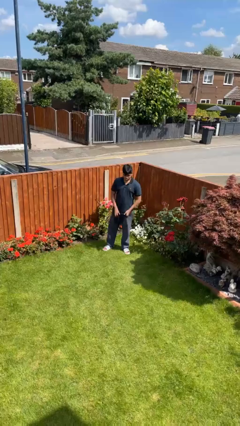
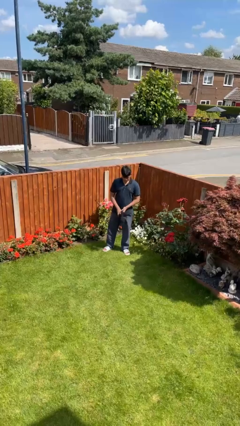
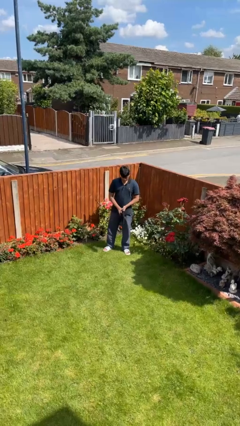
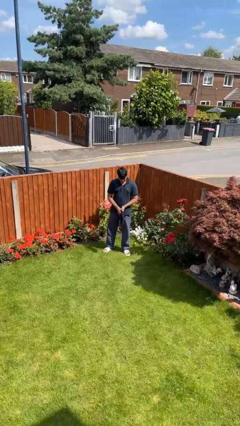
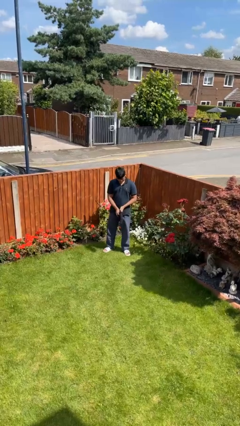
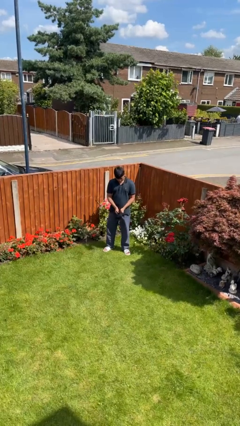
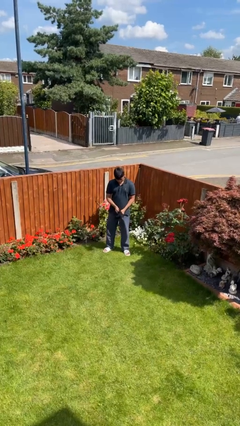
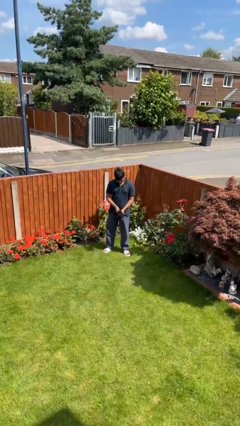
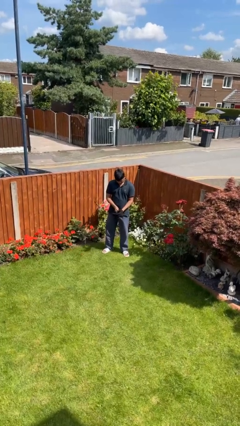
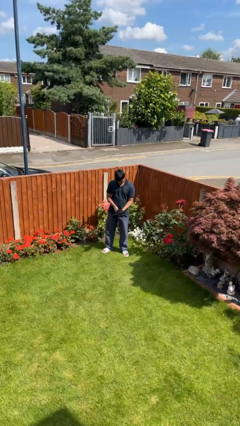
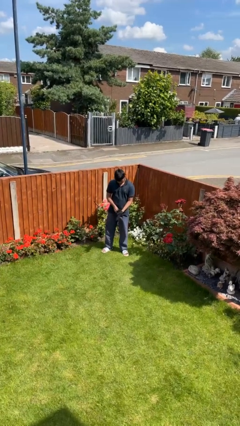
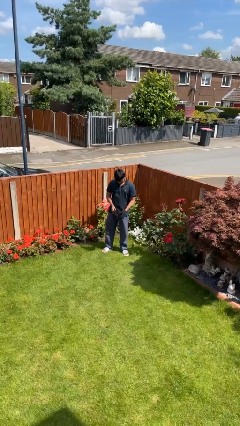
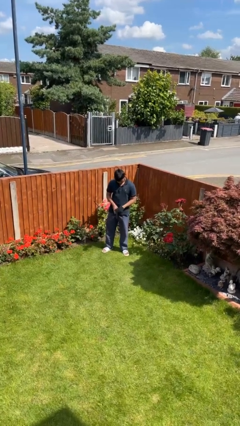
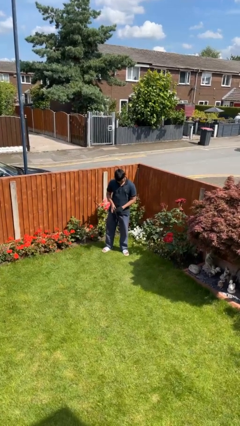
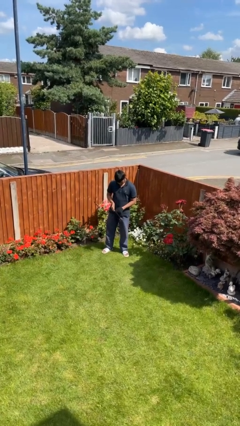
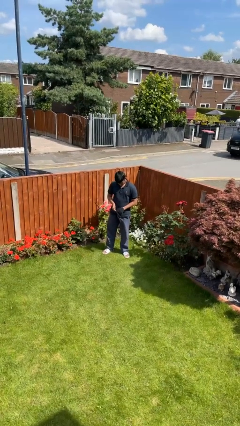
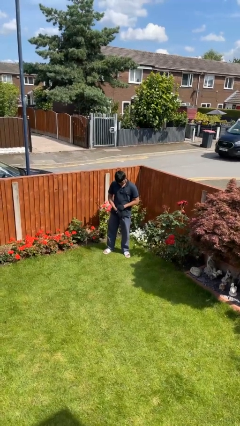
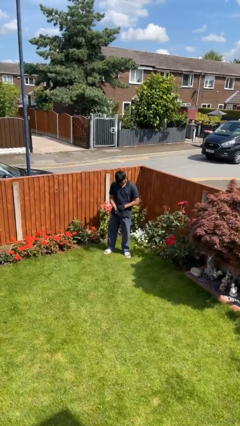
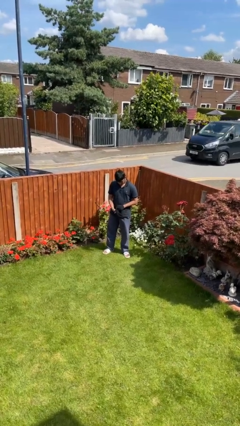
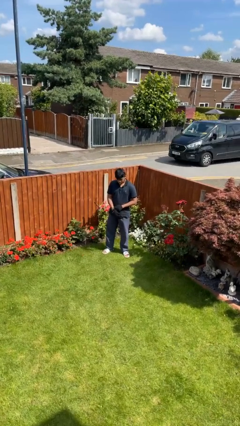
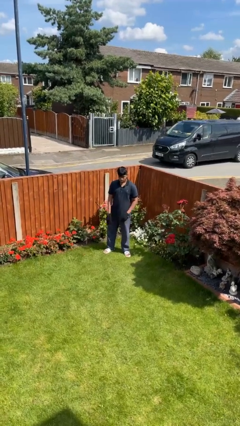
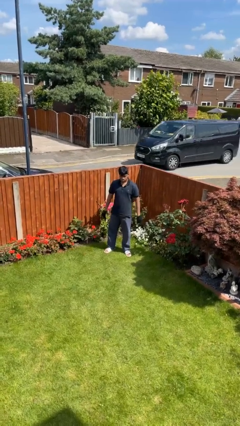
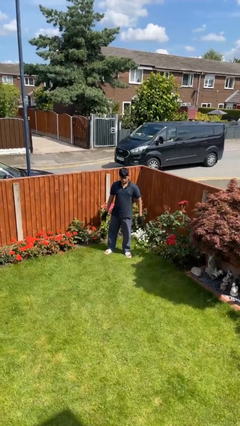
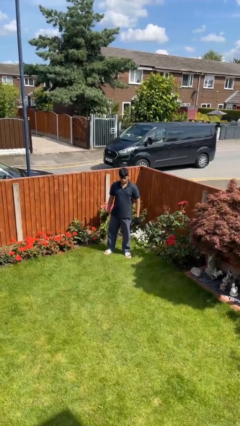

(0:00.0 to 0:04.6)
person puts on gloves

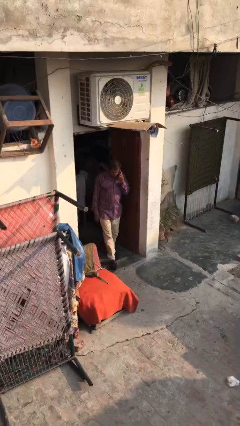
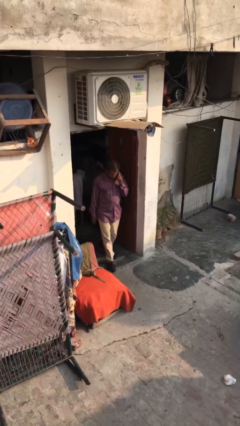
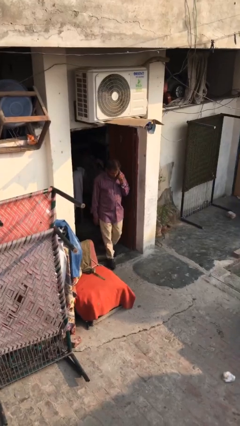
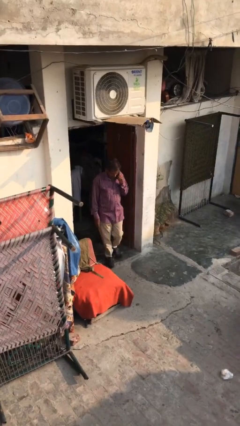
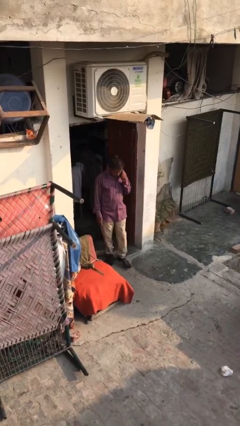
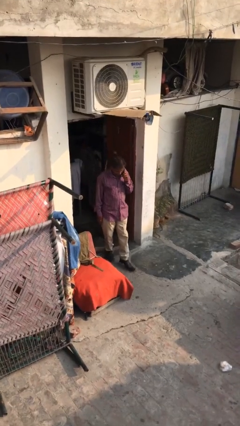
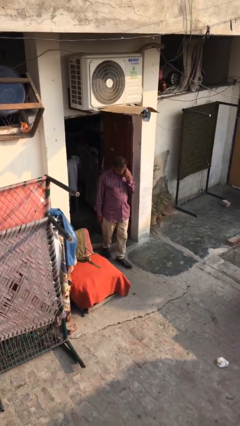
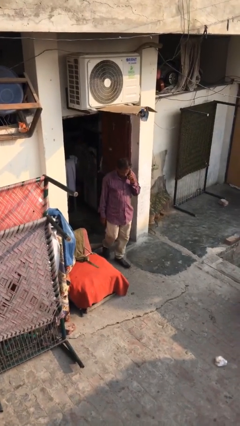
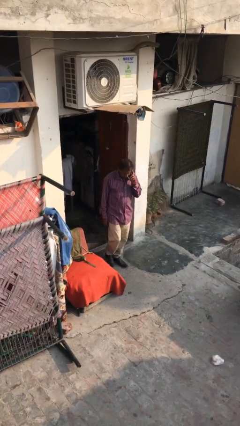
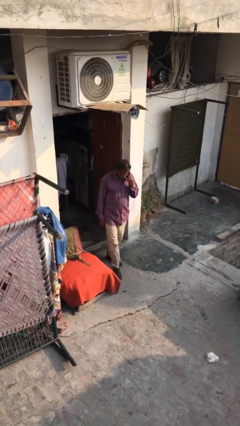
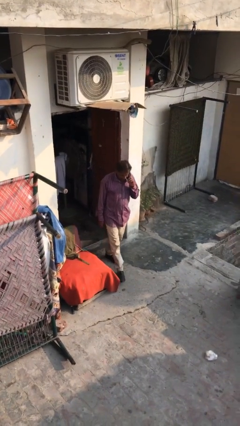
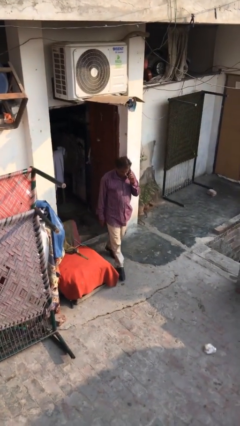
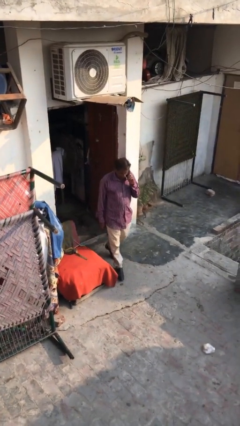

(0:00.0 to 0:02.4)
person enters scene through structure

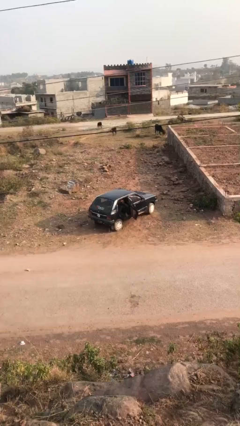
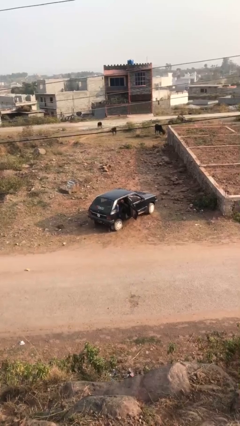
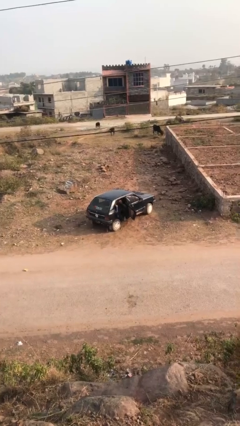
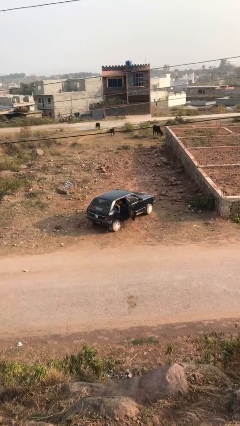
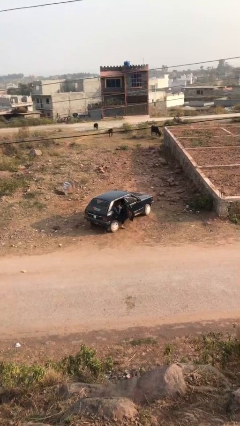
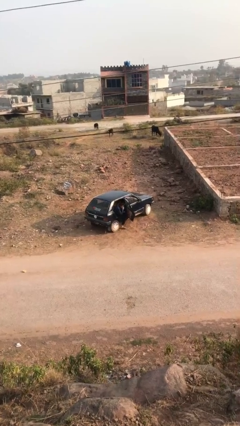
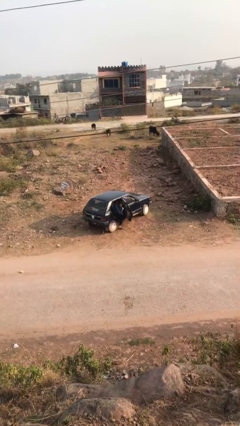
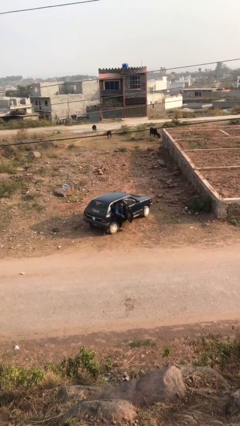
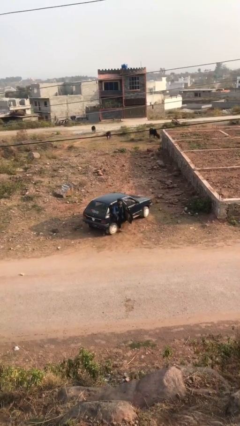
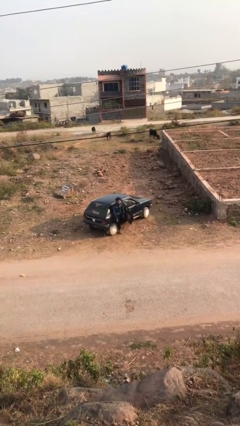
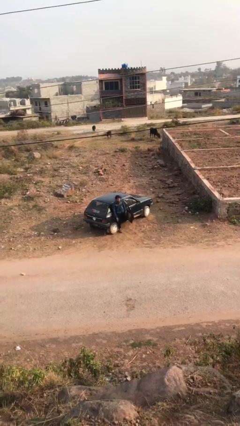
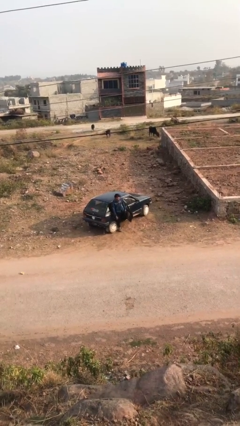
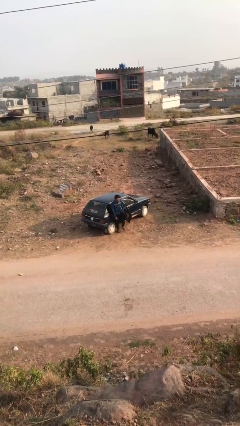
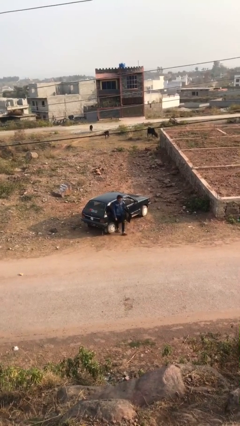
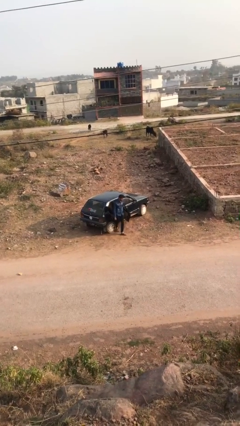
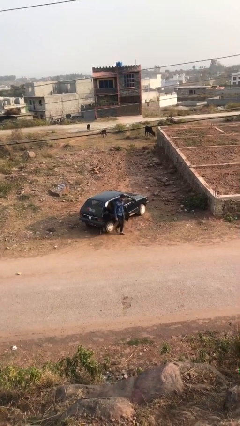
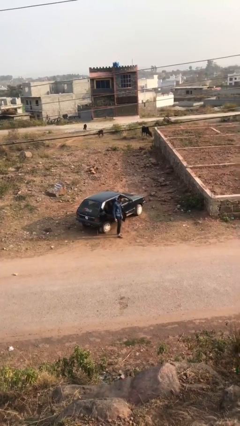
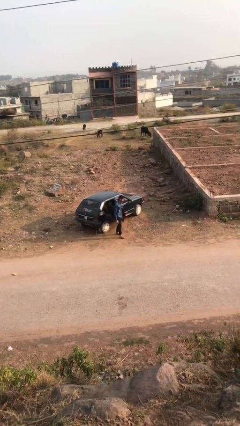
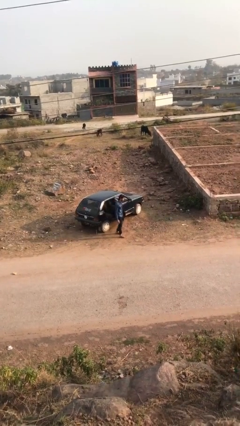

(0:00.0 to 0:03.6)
person exits car

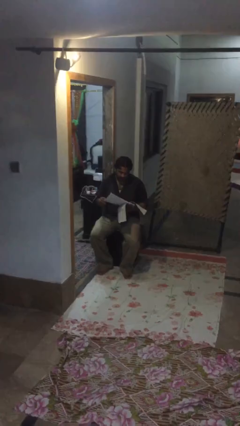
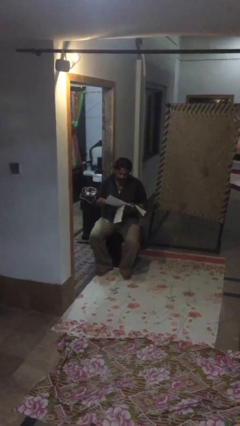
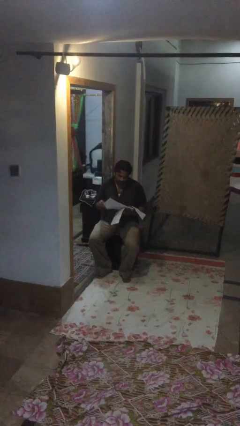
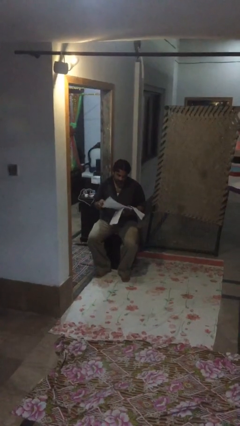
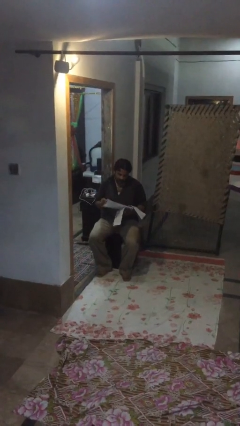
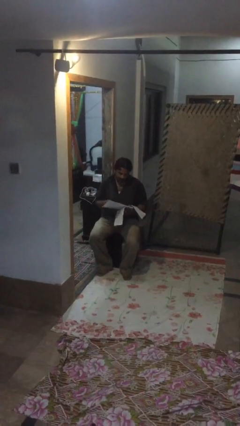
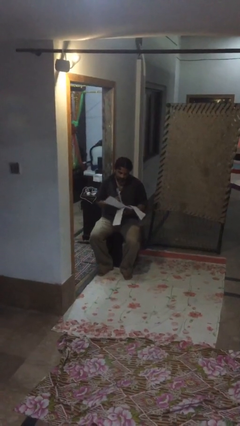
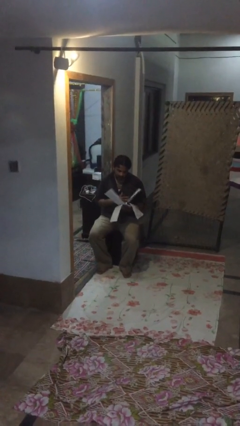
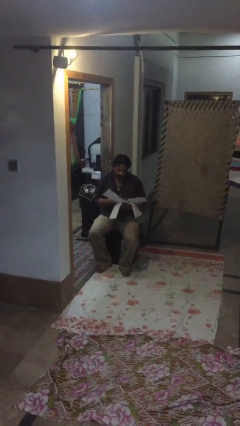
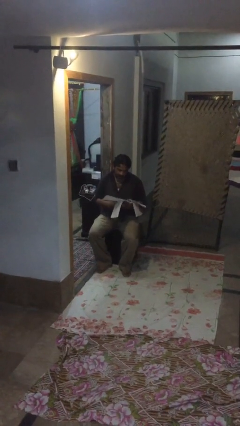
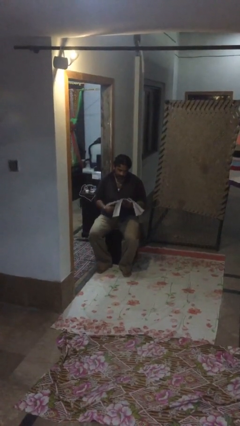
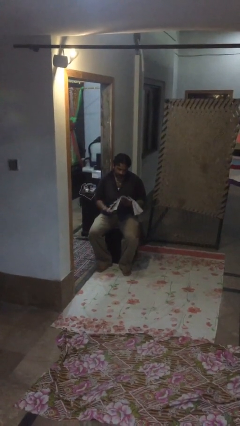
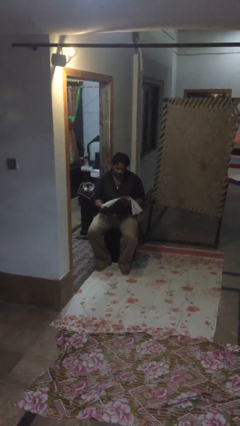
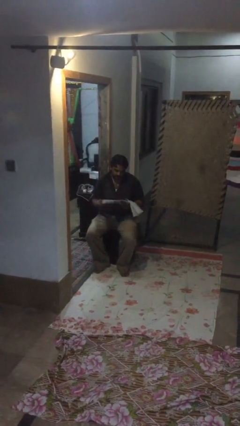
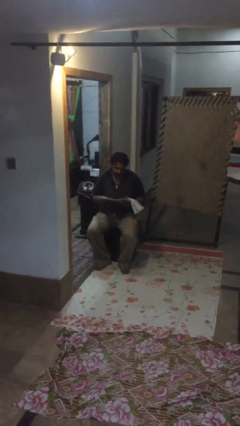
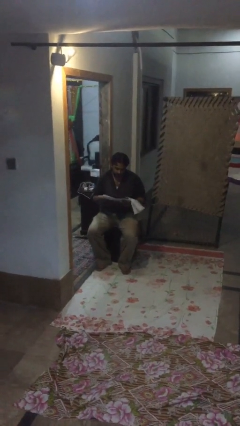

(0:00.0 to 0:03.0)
person reads document

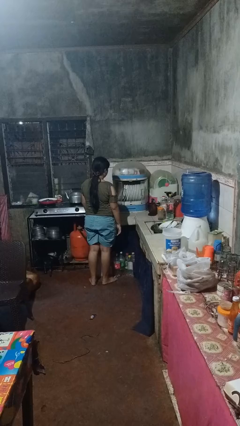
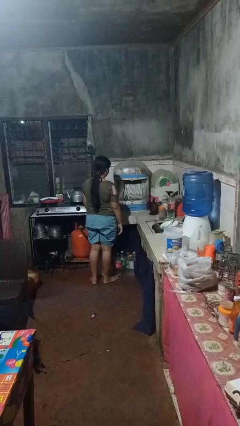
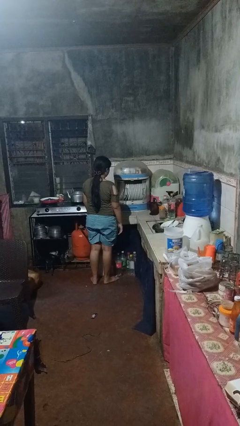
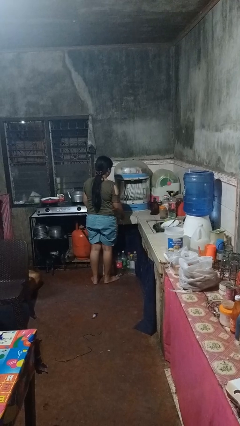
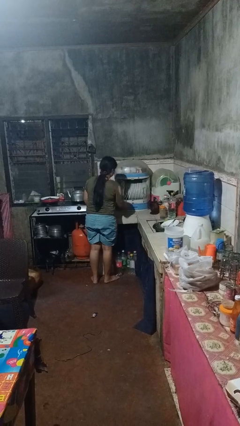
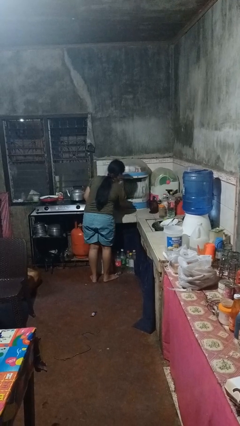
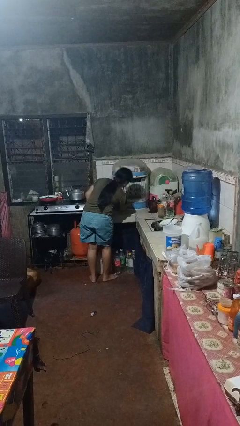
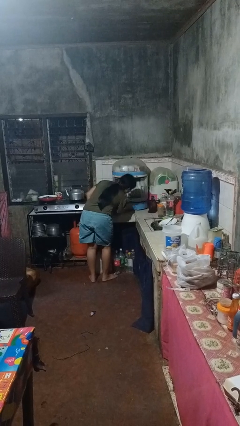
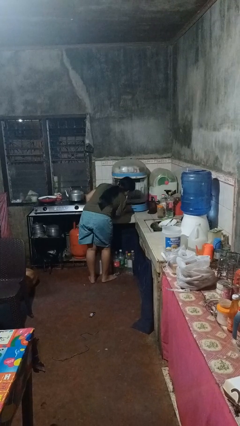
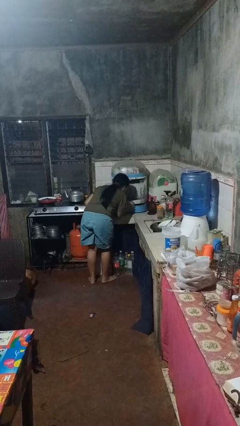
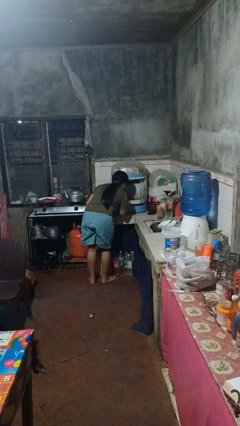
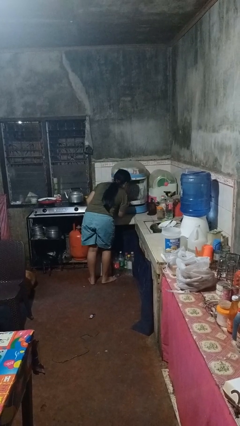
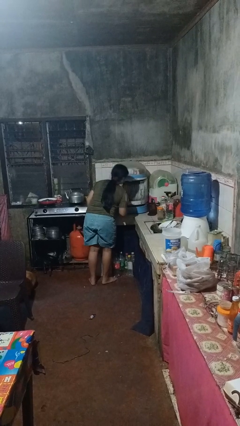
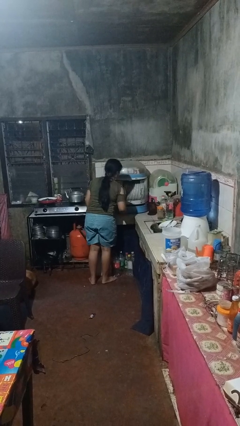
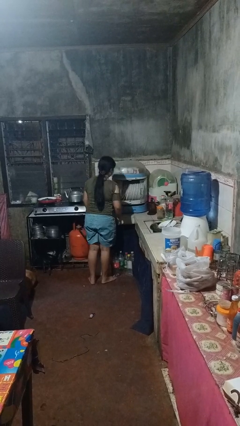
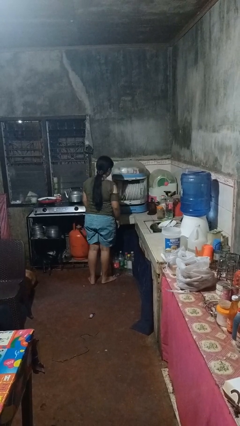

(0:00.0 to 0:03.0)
person searches in kitchen drawer

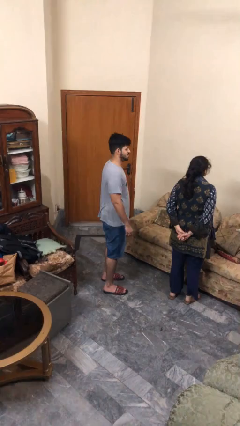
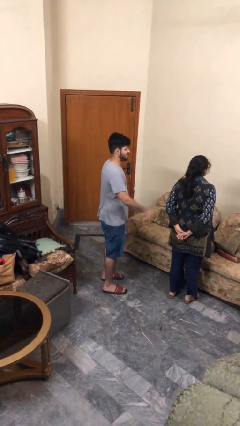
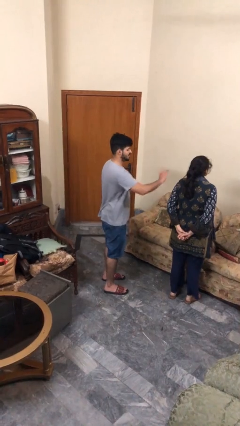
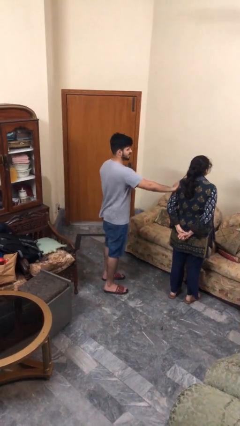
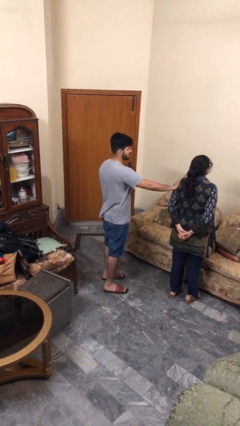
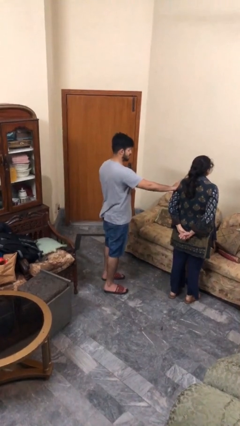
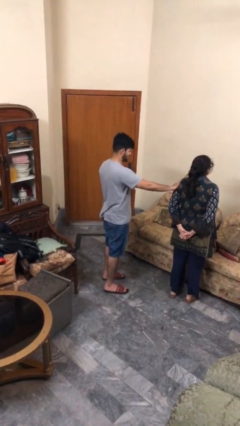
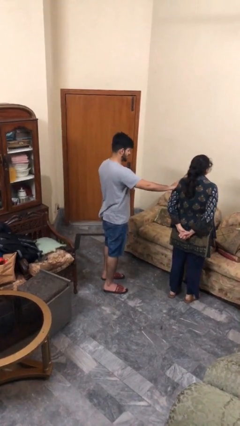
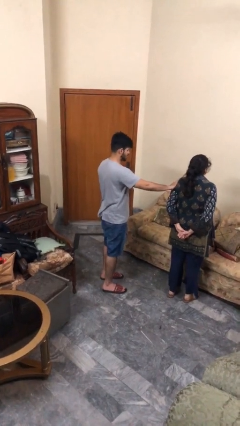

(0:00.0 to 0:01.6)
person grabs person by shoulder
